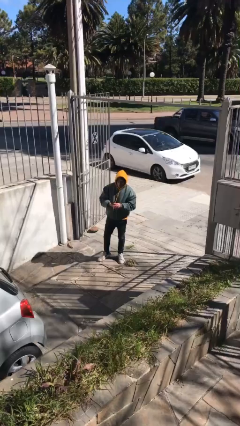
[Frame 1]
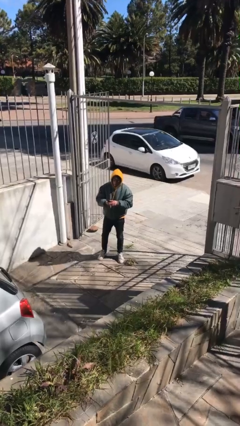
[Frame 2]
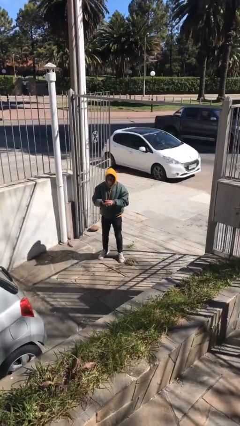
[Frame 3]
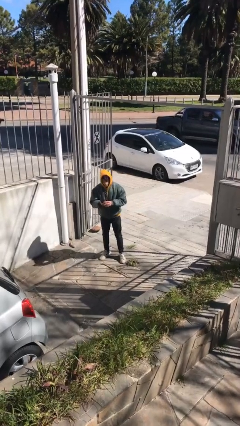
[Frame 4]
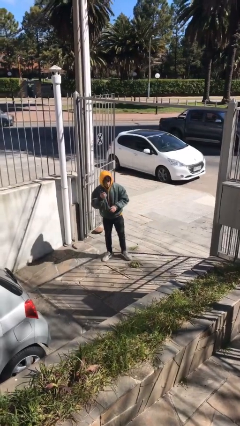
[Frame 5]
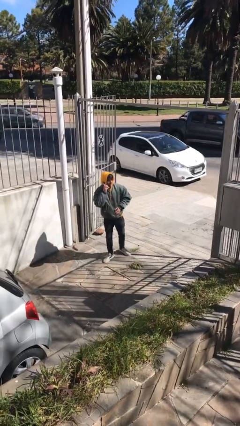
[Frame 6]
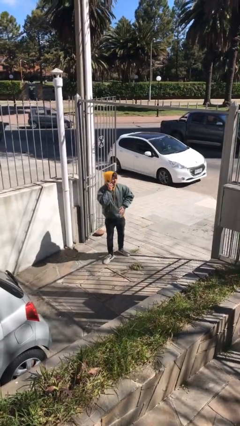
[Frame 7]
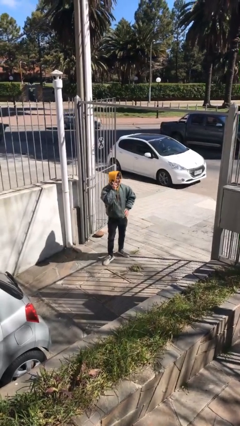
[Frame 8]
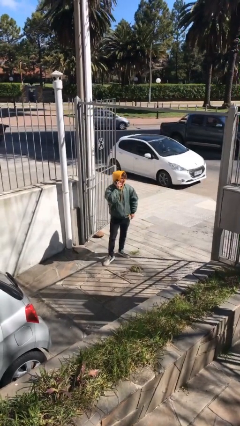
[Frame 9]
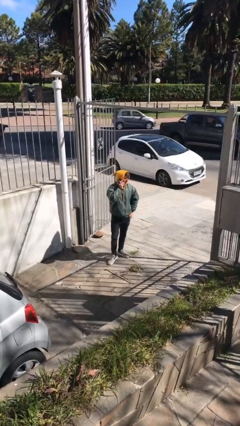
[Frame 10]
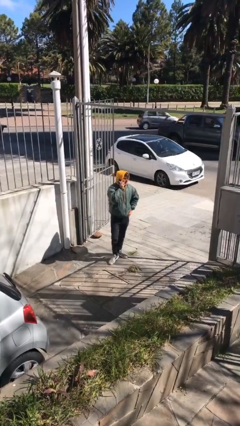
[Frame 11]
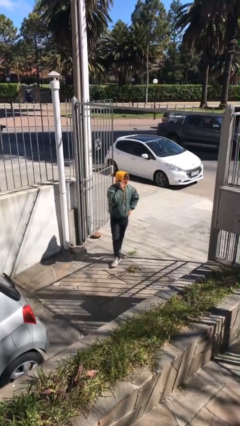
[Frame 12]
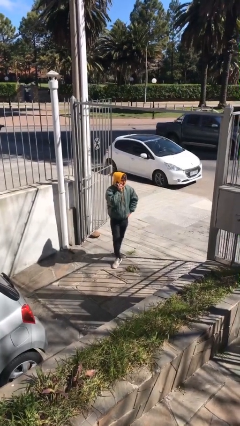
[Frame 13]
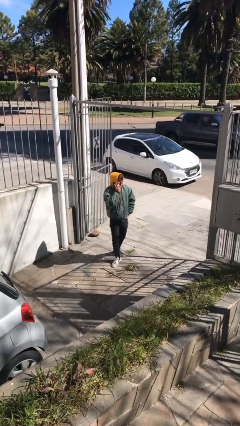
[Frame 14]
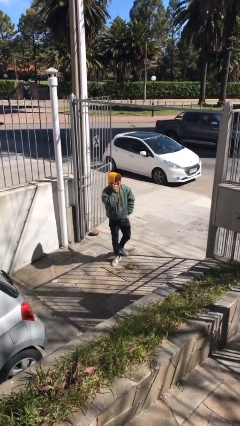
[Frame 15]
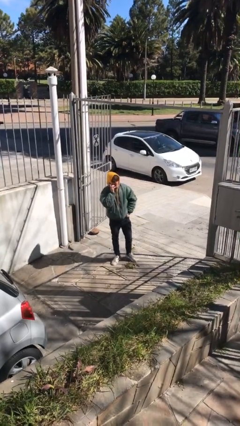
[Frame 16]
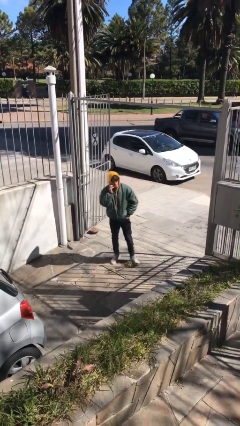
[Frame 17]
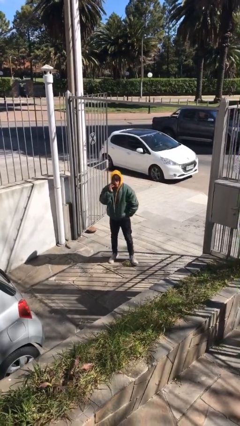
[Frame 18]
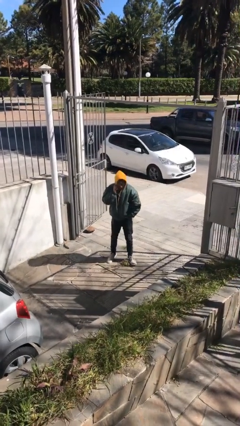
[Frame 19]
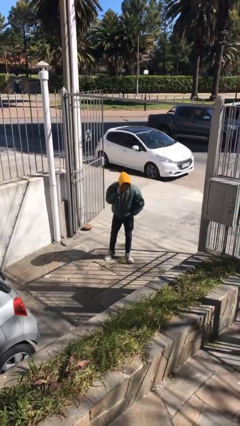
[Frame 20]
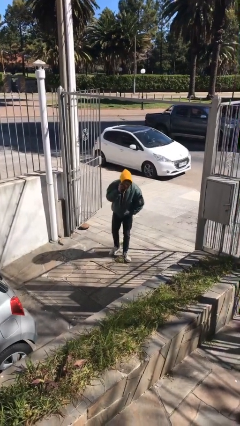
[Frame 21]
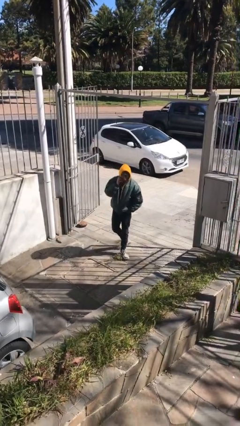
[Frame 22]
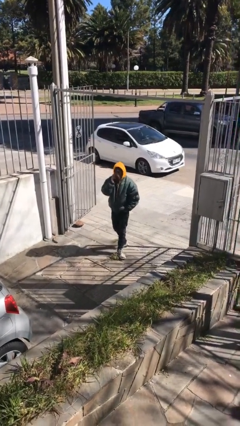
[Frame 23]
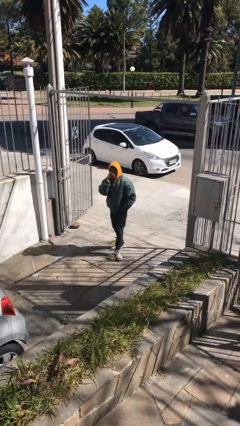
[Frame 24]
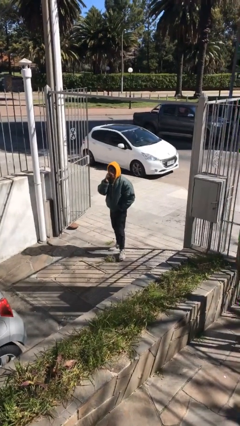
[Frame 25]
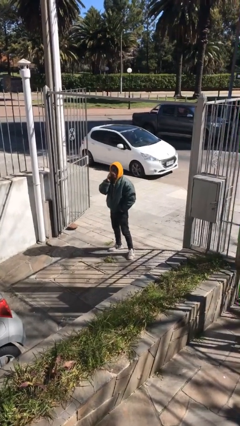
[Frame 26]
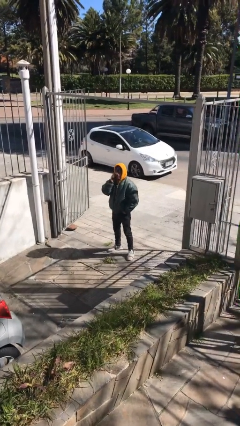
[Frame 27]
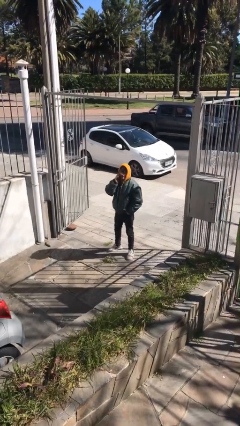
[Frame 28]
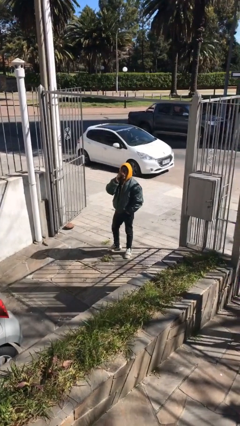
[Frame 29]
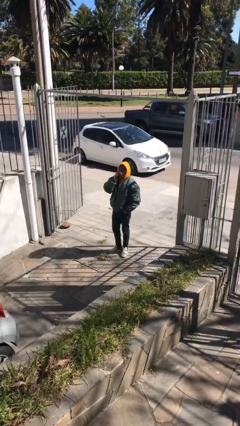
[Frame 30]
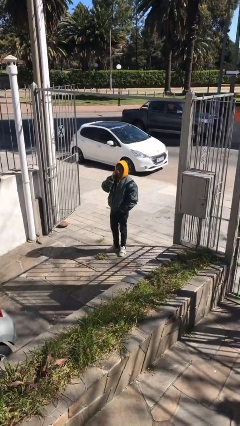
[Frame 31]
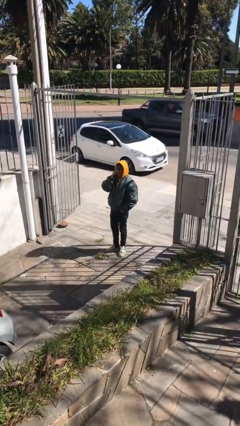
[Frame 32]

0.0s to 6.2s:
person talks on phone

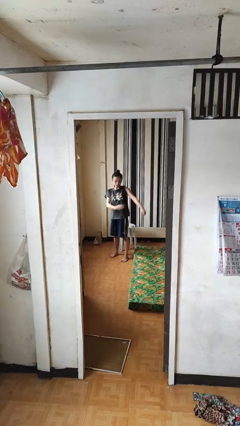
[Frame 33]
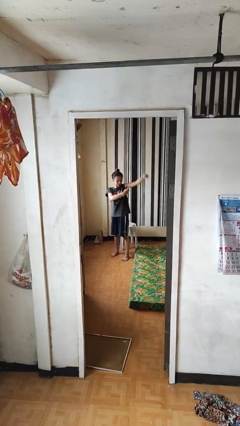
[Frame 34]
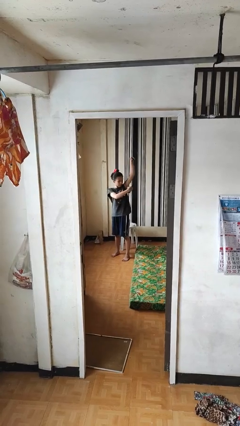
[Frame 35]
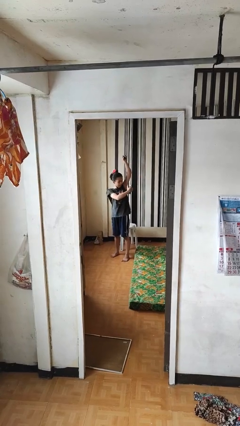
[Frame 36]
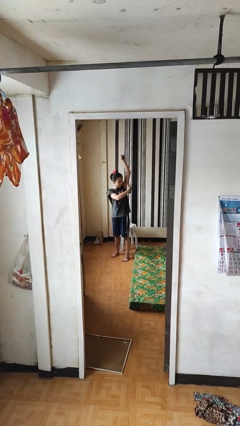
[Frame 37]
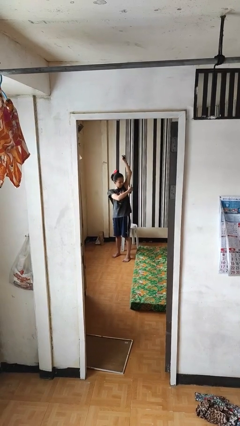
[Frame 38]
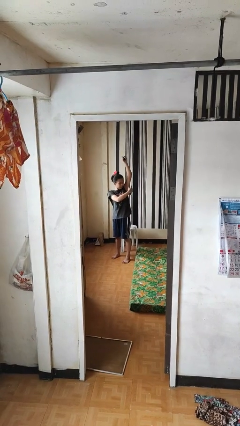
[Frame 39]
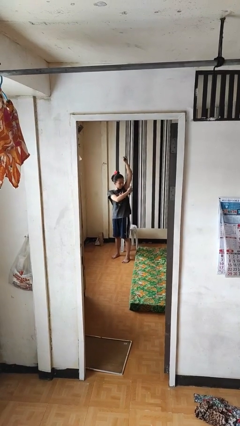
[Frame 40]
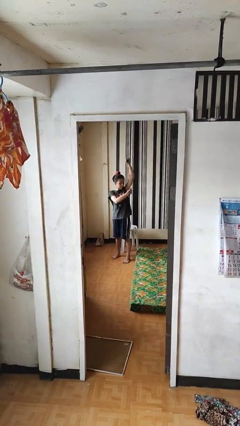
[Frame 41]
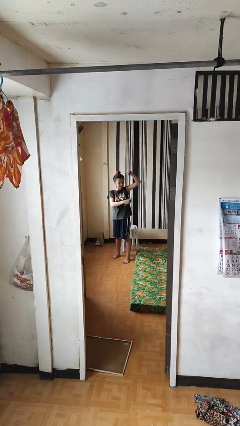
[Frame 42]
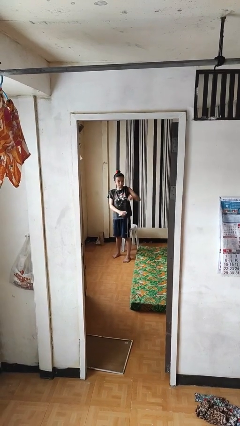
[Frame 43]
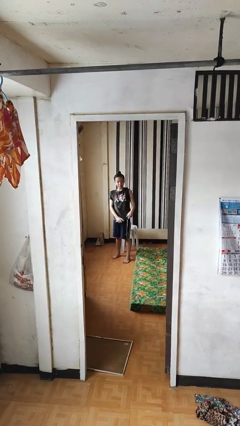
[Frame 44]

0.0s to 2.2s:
person applies deodorant

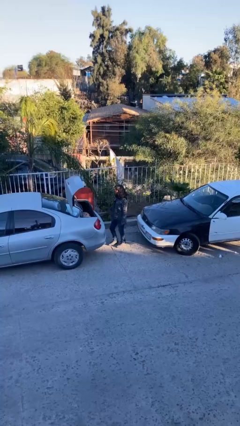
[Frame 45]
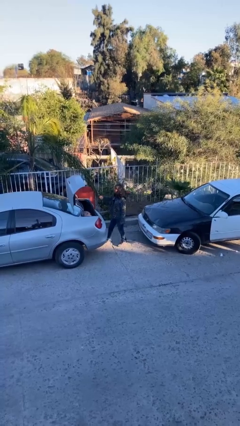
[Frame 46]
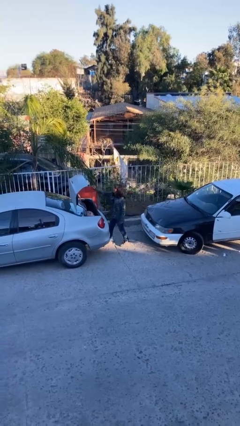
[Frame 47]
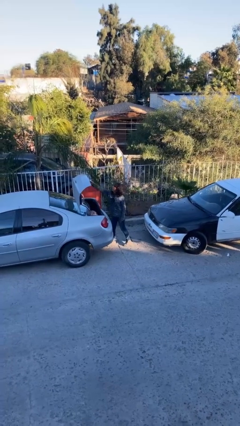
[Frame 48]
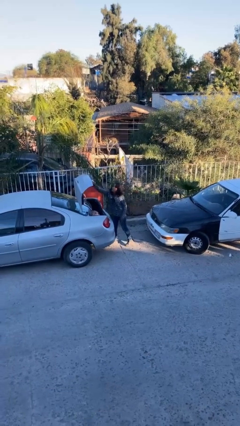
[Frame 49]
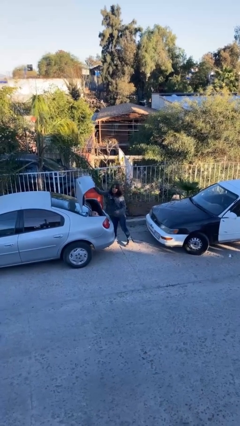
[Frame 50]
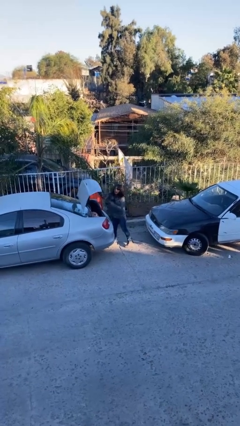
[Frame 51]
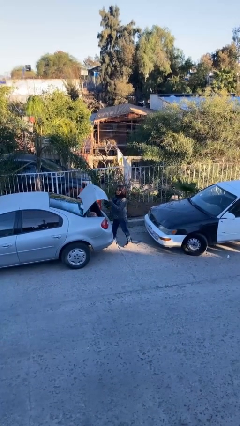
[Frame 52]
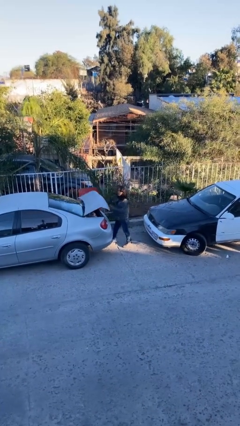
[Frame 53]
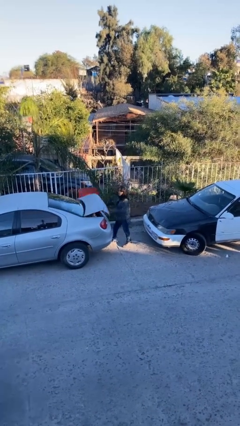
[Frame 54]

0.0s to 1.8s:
person closes car trunk

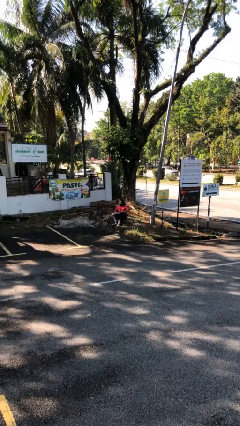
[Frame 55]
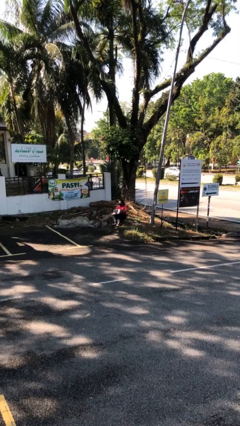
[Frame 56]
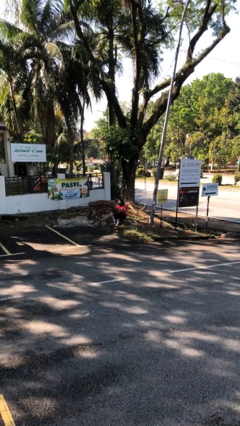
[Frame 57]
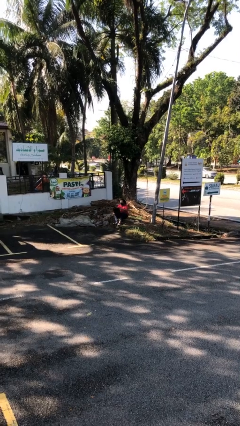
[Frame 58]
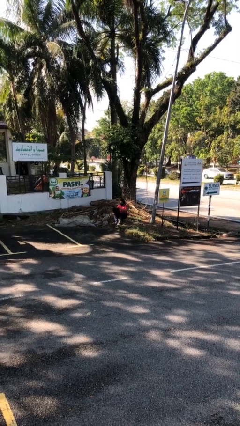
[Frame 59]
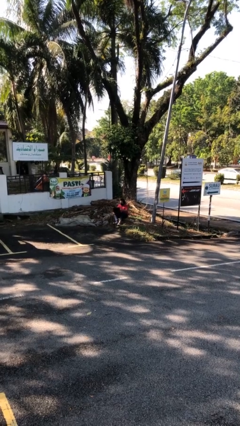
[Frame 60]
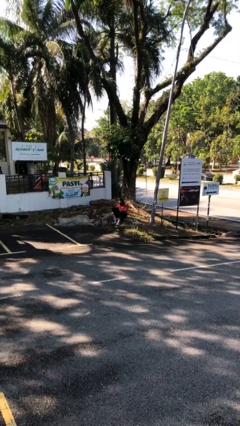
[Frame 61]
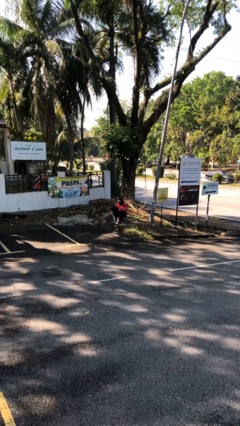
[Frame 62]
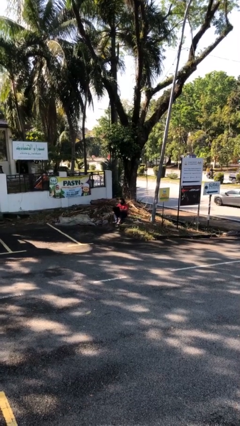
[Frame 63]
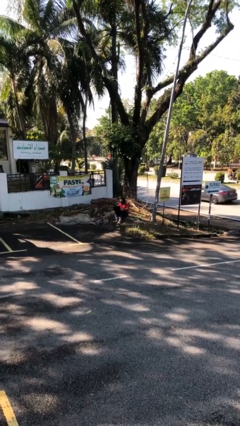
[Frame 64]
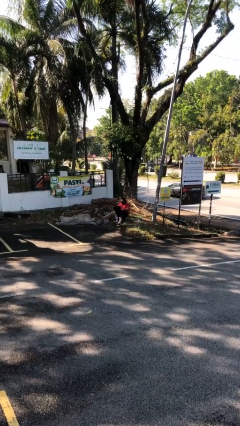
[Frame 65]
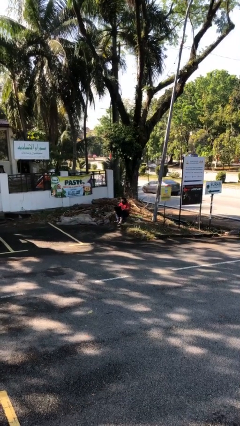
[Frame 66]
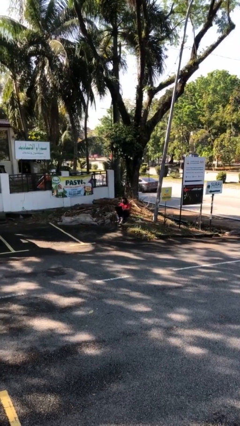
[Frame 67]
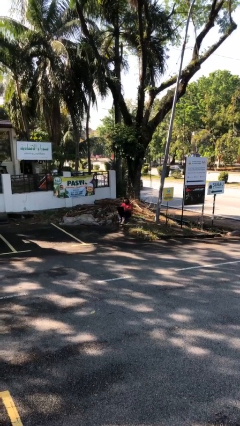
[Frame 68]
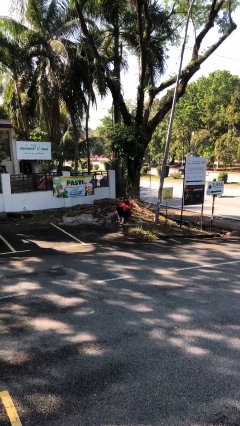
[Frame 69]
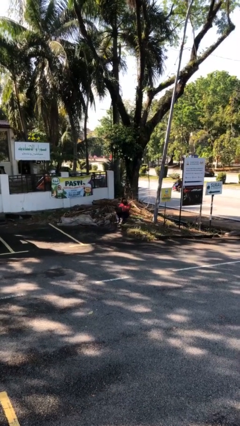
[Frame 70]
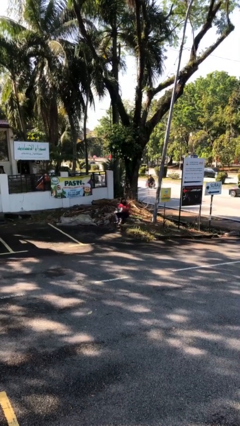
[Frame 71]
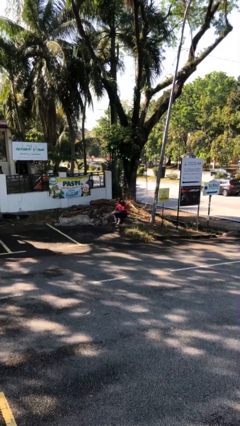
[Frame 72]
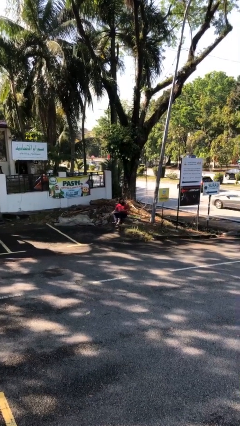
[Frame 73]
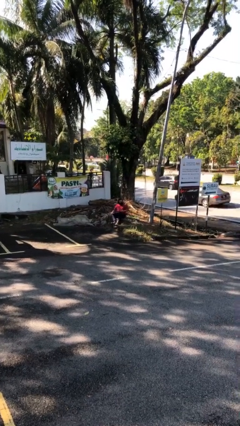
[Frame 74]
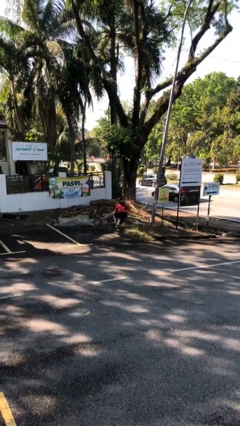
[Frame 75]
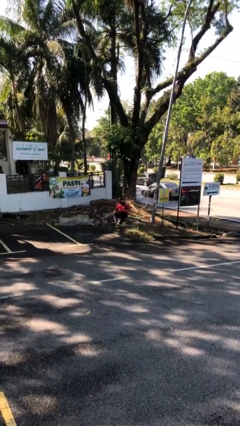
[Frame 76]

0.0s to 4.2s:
person interacts with laptop

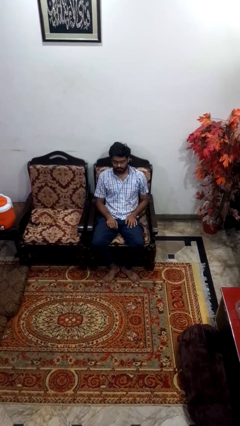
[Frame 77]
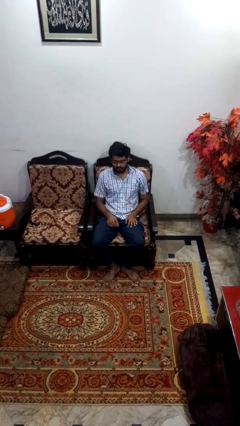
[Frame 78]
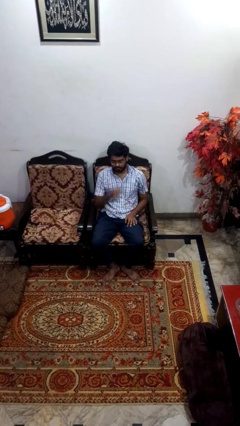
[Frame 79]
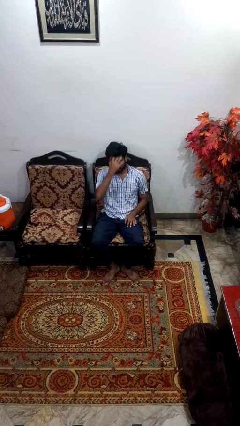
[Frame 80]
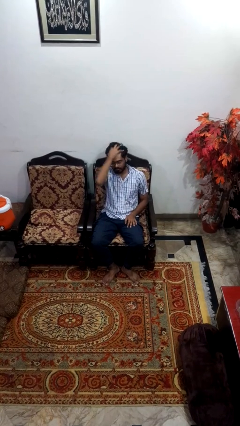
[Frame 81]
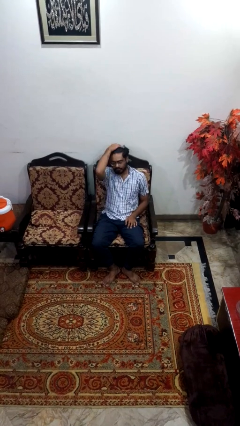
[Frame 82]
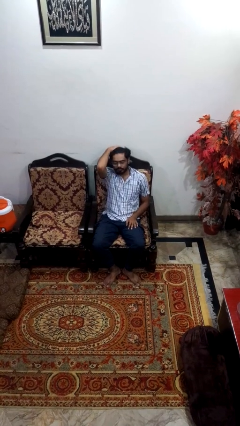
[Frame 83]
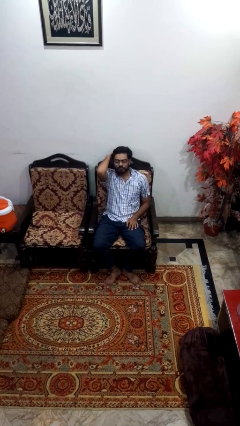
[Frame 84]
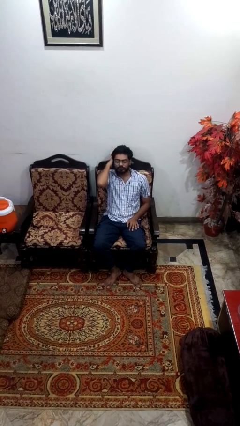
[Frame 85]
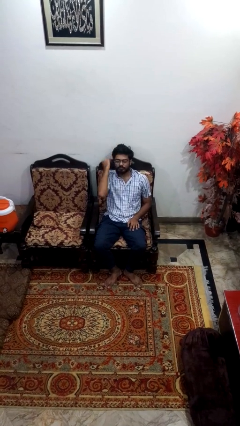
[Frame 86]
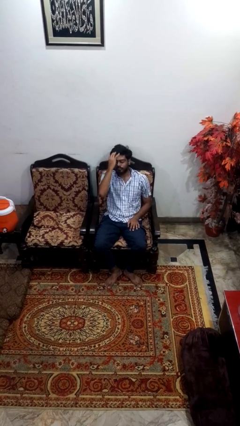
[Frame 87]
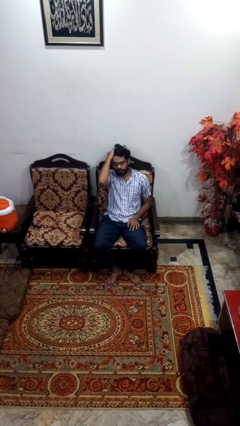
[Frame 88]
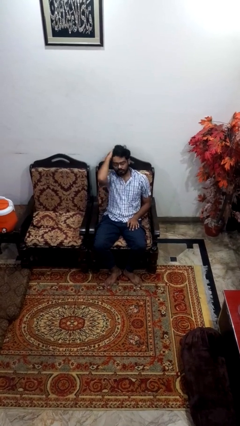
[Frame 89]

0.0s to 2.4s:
person strokes hair

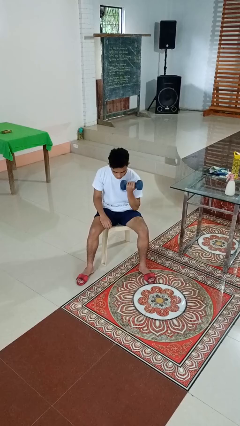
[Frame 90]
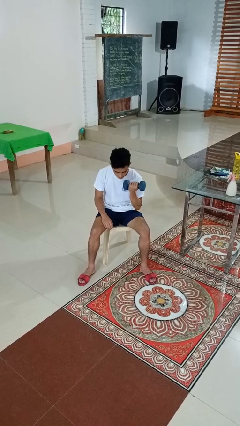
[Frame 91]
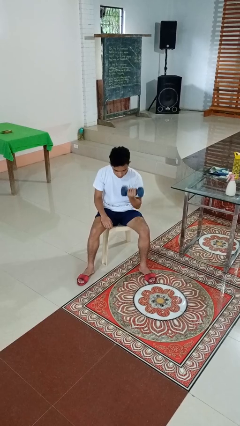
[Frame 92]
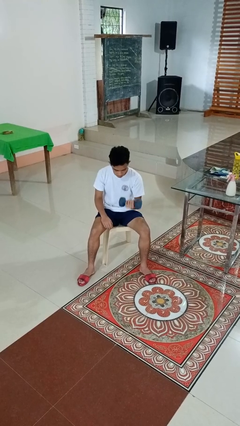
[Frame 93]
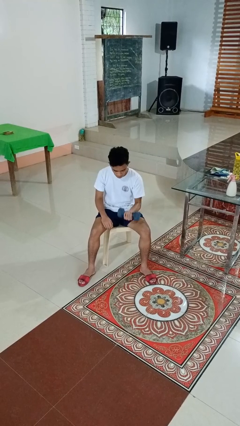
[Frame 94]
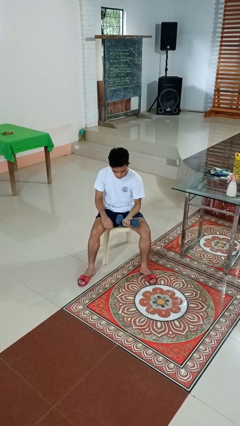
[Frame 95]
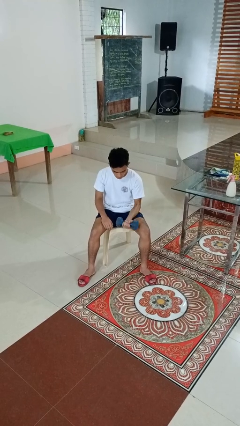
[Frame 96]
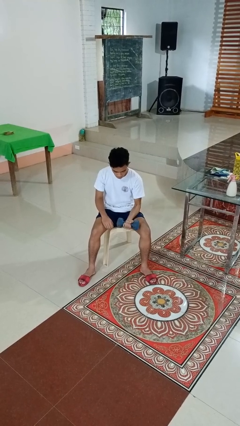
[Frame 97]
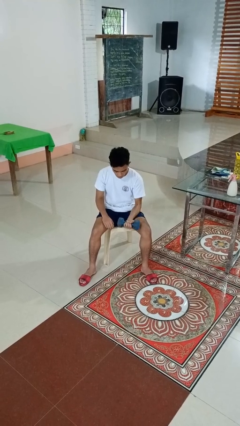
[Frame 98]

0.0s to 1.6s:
person lifts dumbbells
